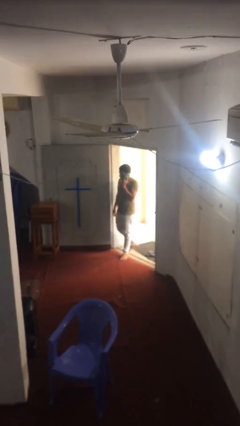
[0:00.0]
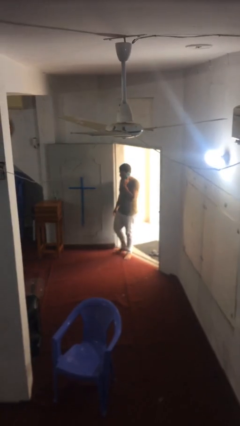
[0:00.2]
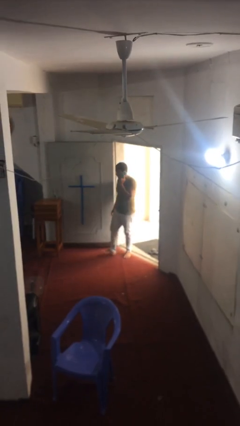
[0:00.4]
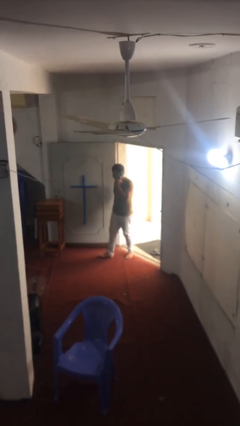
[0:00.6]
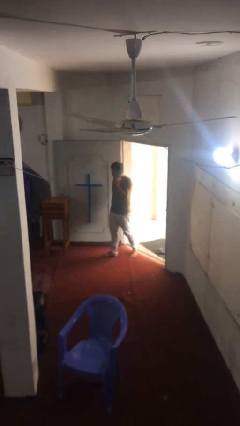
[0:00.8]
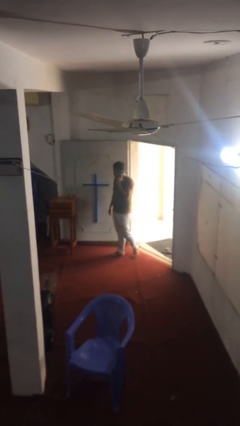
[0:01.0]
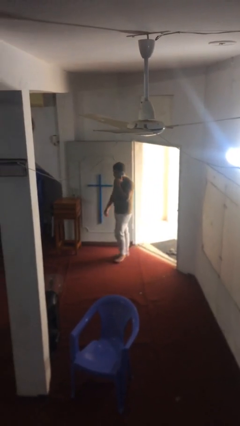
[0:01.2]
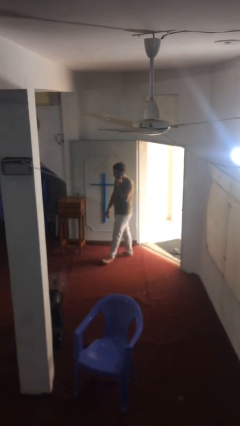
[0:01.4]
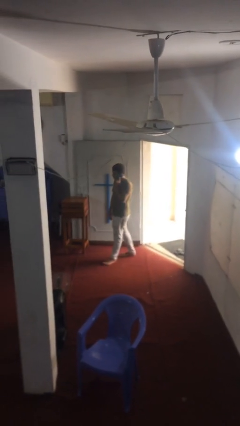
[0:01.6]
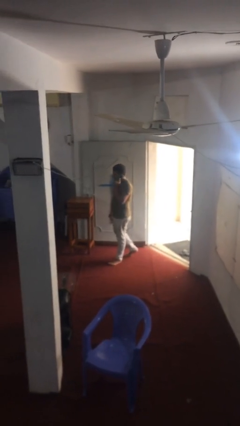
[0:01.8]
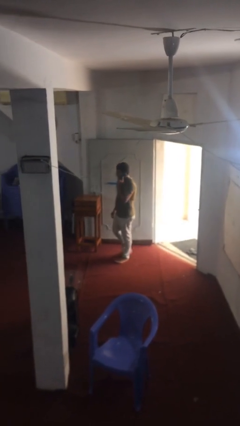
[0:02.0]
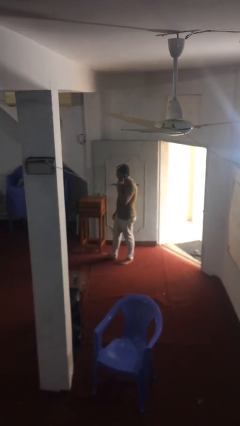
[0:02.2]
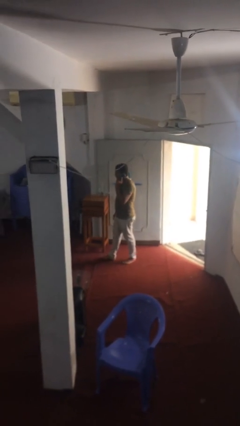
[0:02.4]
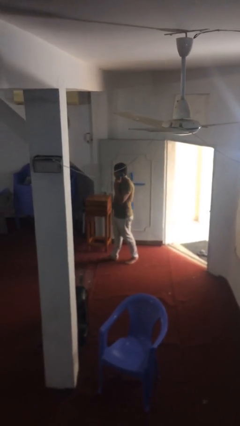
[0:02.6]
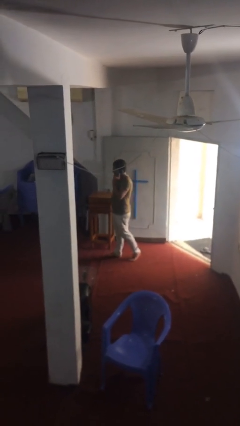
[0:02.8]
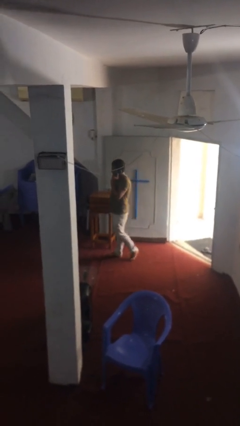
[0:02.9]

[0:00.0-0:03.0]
person enters scene through structure

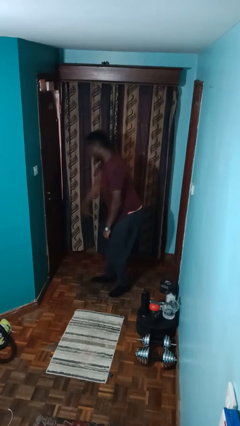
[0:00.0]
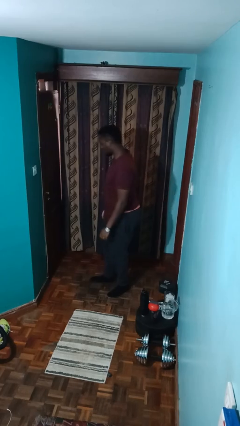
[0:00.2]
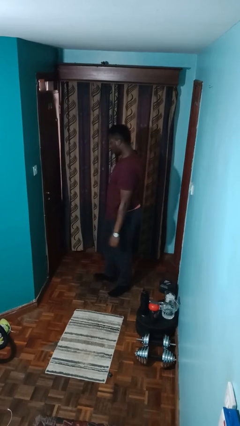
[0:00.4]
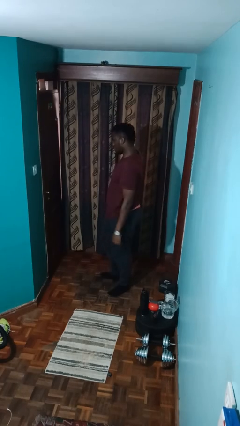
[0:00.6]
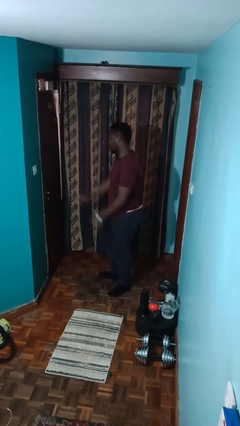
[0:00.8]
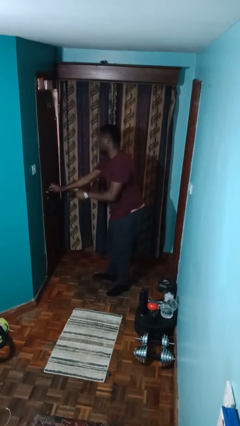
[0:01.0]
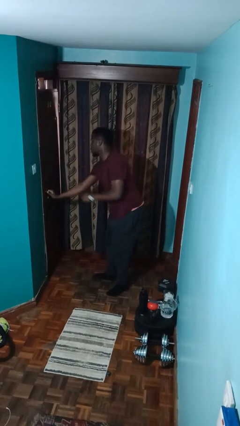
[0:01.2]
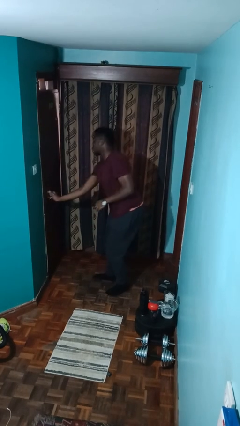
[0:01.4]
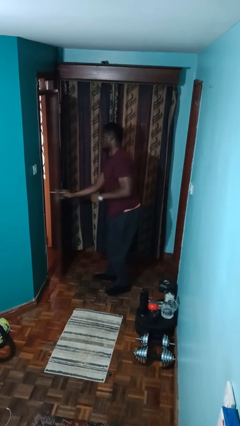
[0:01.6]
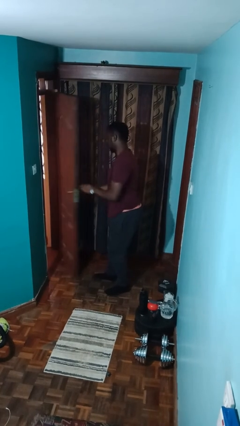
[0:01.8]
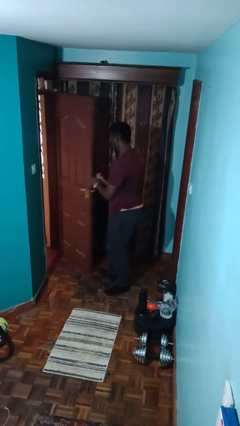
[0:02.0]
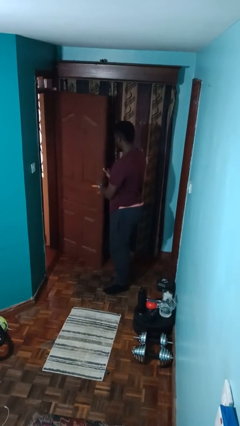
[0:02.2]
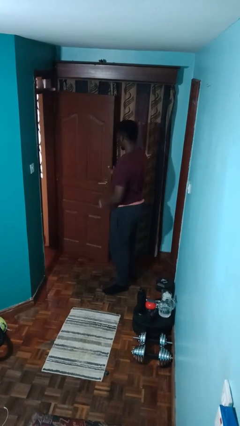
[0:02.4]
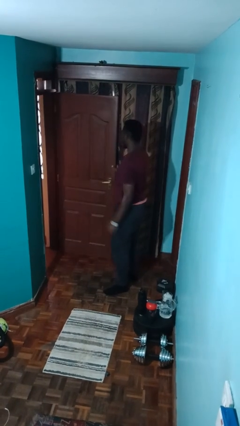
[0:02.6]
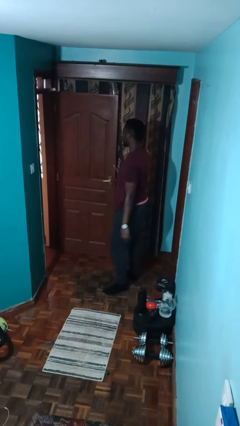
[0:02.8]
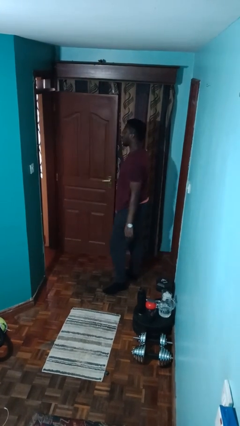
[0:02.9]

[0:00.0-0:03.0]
person opens facility door

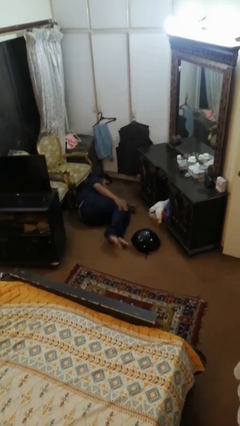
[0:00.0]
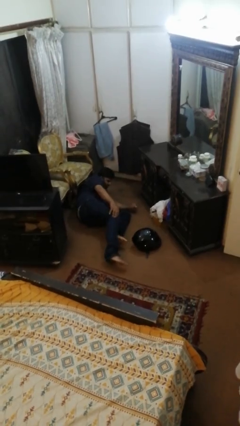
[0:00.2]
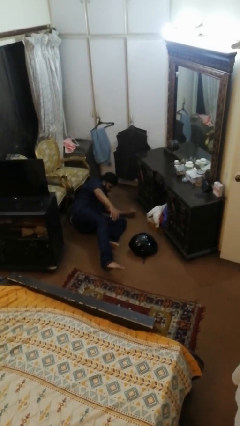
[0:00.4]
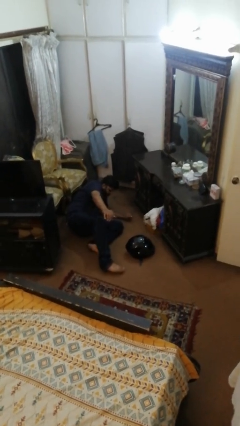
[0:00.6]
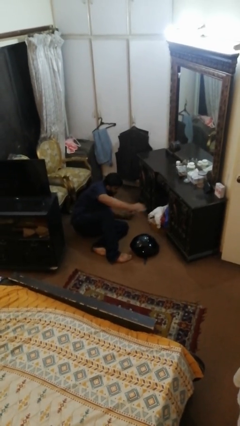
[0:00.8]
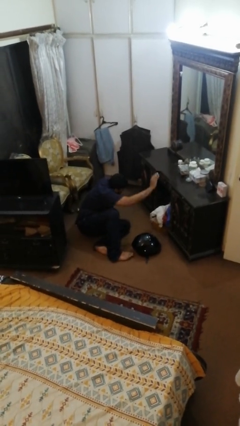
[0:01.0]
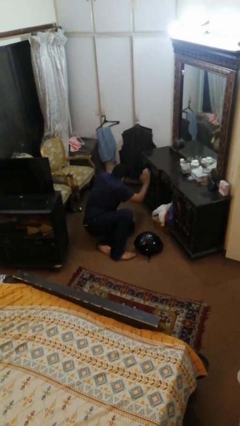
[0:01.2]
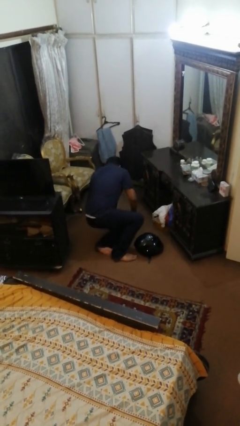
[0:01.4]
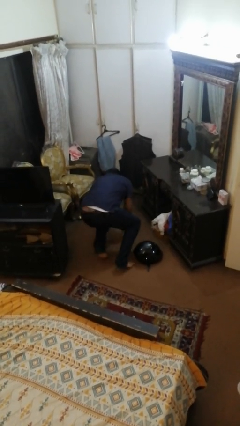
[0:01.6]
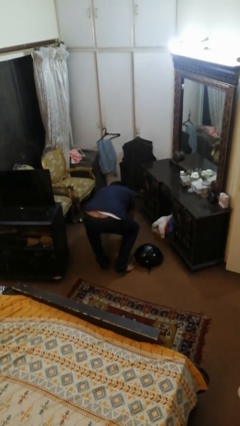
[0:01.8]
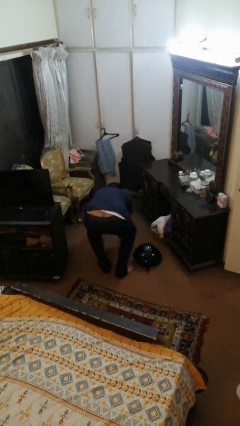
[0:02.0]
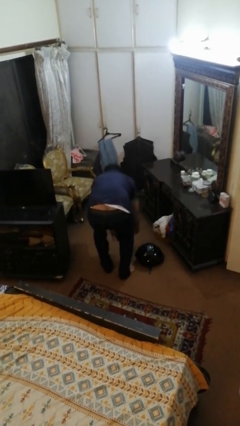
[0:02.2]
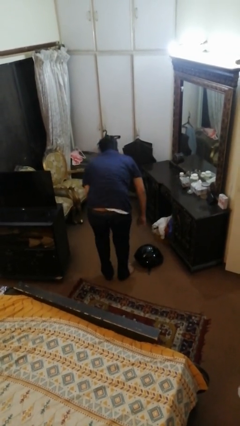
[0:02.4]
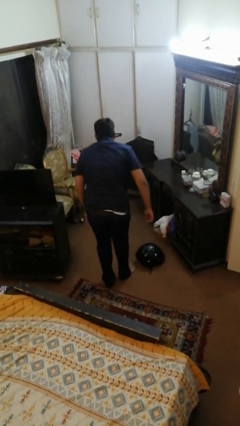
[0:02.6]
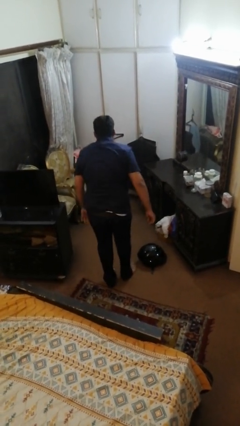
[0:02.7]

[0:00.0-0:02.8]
person stands up from floor

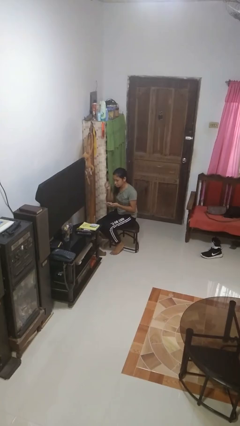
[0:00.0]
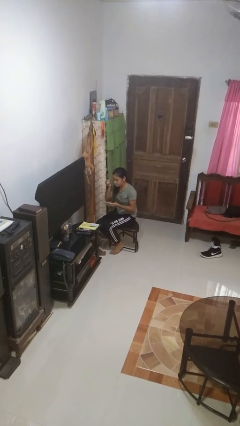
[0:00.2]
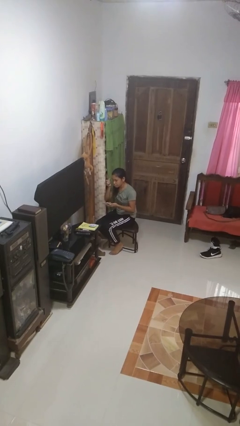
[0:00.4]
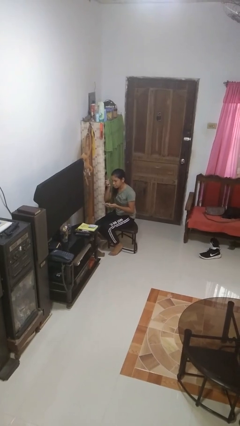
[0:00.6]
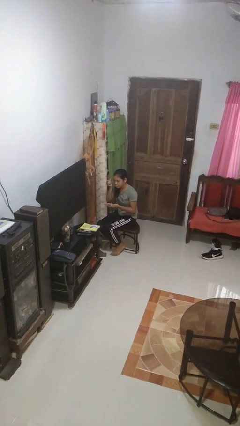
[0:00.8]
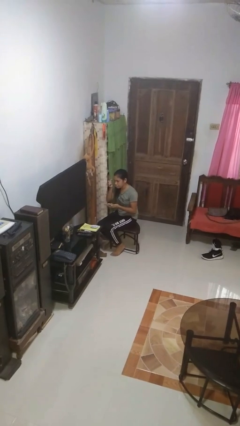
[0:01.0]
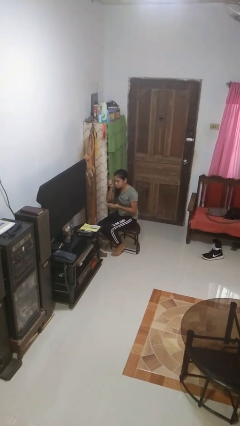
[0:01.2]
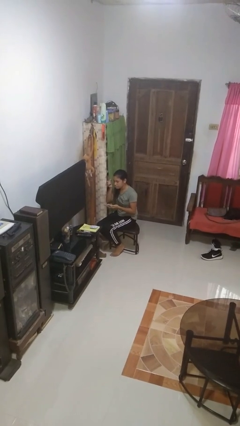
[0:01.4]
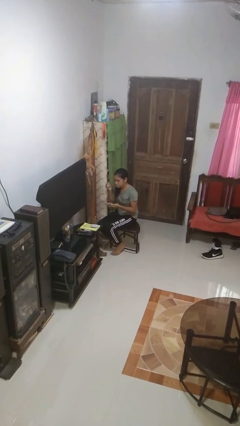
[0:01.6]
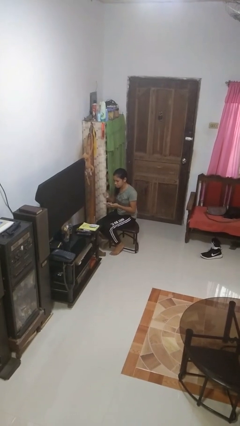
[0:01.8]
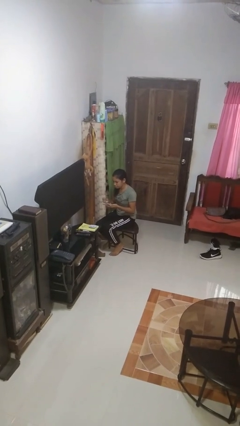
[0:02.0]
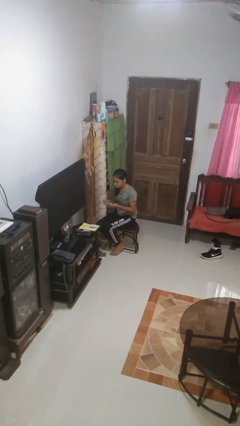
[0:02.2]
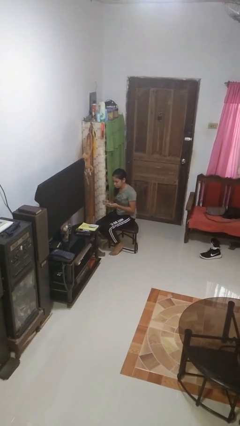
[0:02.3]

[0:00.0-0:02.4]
person applies eye makeup

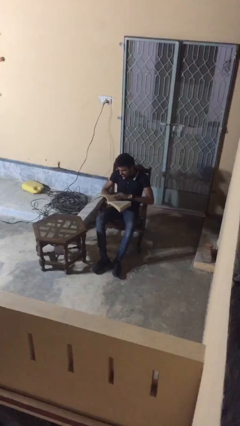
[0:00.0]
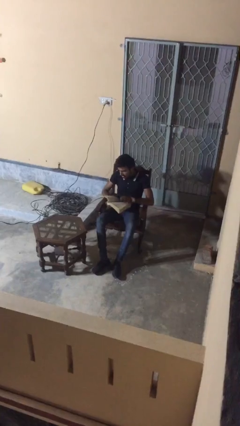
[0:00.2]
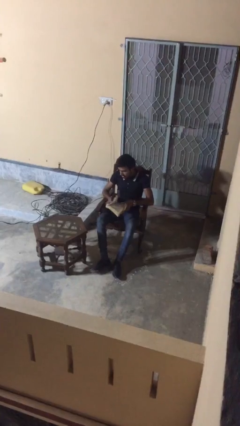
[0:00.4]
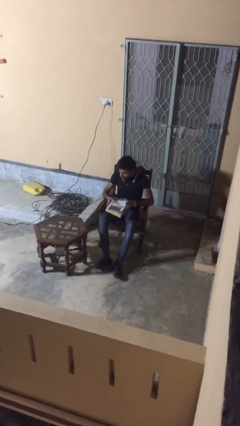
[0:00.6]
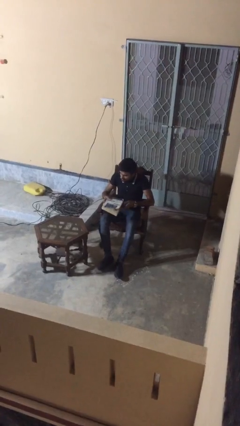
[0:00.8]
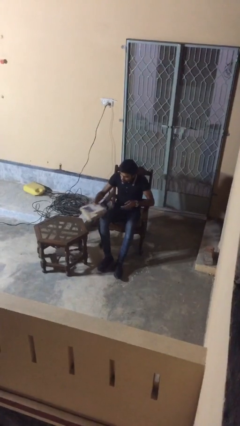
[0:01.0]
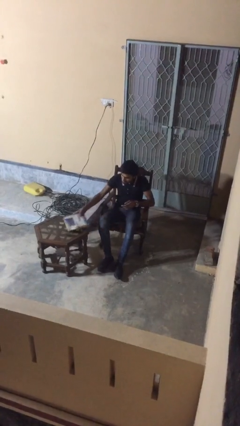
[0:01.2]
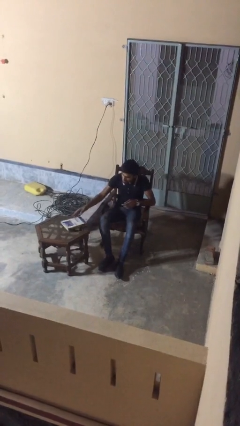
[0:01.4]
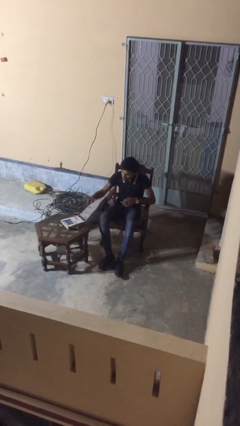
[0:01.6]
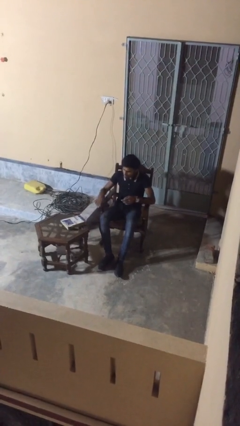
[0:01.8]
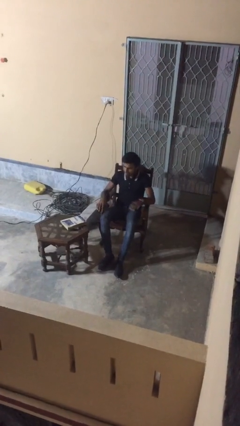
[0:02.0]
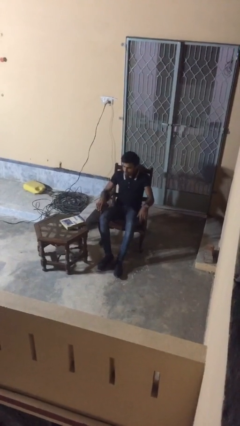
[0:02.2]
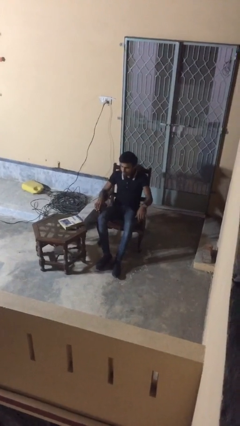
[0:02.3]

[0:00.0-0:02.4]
person puts down object on table

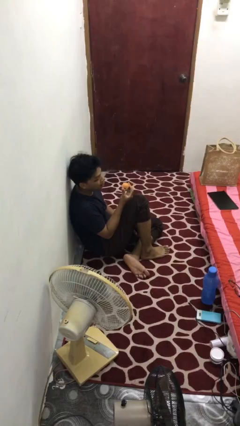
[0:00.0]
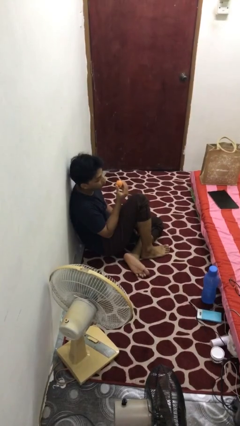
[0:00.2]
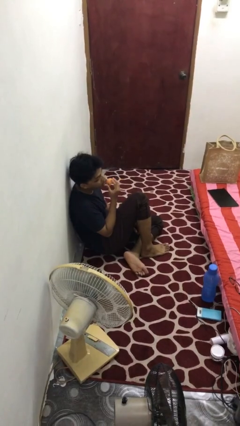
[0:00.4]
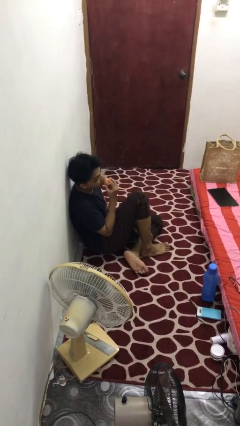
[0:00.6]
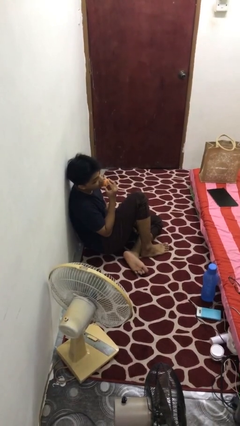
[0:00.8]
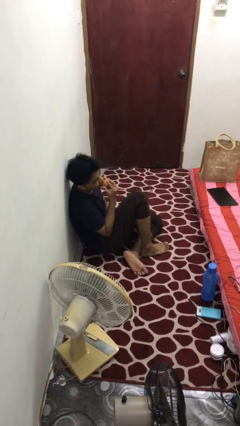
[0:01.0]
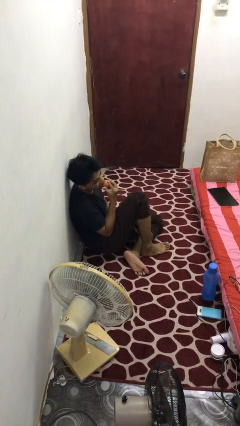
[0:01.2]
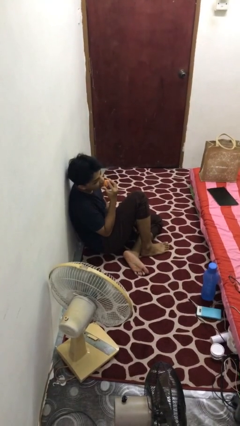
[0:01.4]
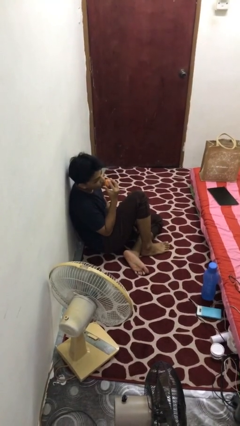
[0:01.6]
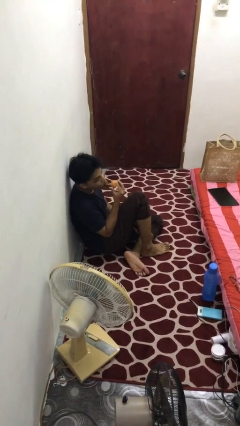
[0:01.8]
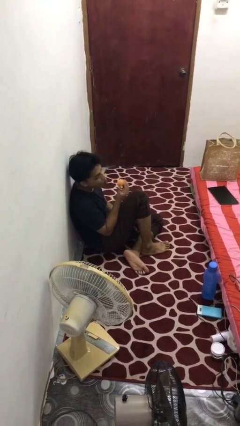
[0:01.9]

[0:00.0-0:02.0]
person eats apple

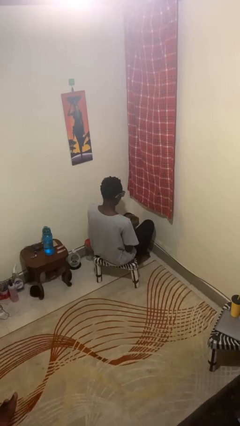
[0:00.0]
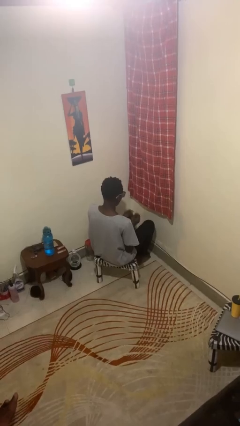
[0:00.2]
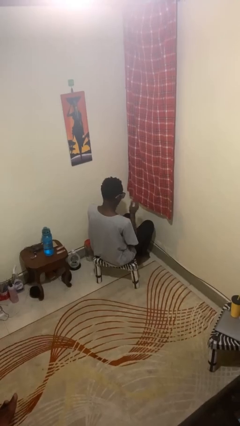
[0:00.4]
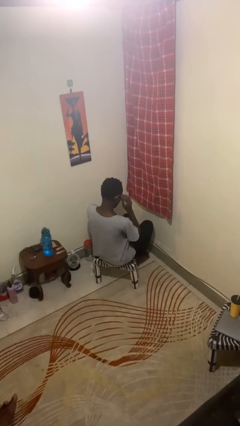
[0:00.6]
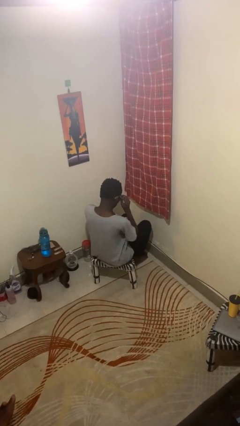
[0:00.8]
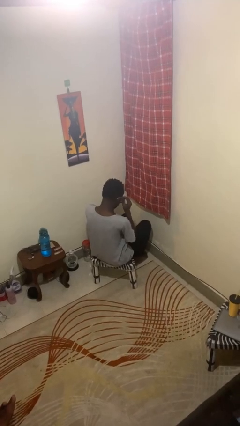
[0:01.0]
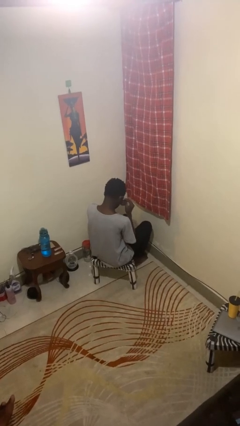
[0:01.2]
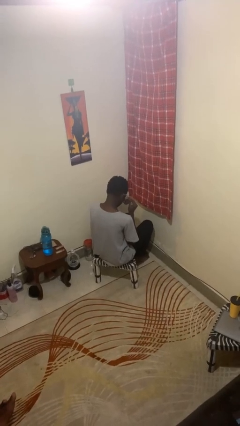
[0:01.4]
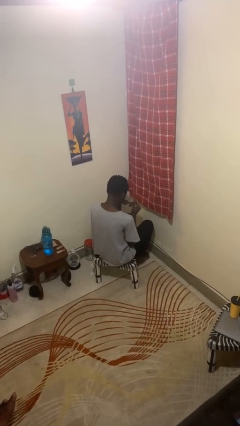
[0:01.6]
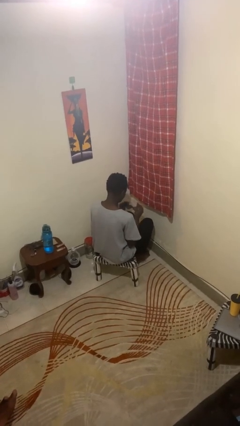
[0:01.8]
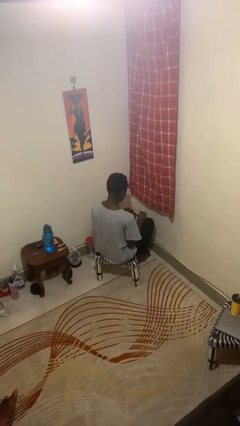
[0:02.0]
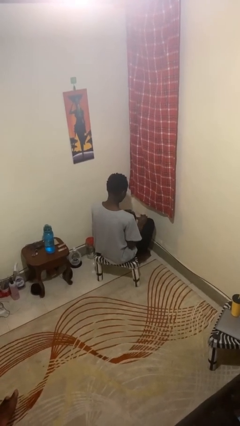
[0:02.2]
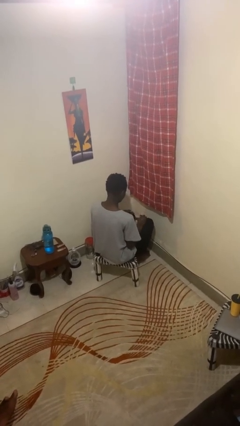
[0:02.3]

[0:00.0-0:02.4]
person takes off glasses
